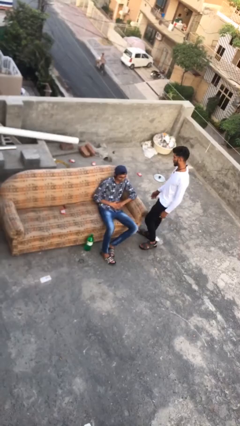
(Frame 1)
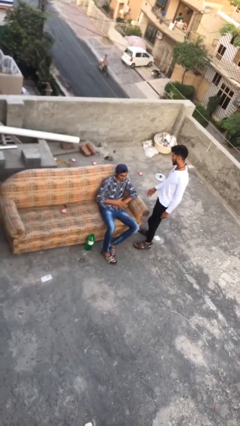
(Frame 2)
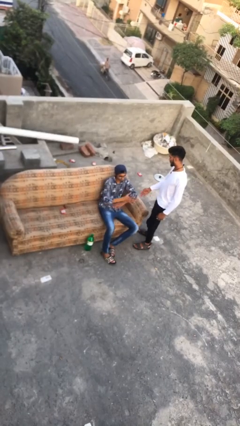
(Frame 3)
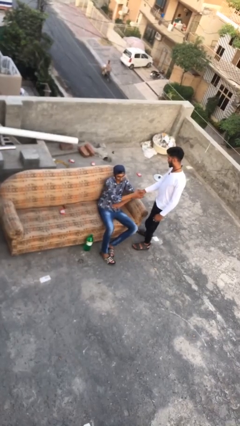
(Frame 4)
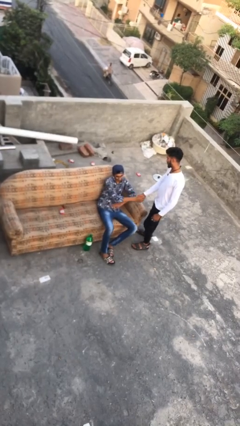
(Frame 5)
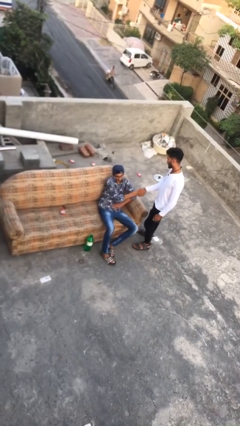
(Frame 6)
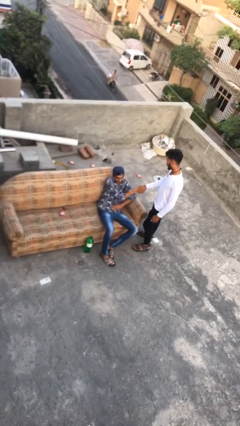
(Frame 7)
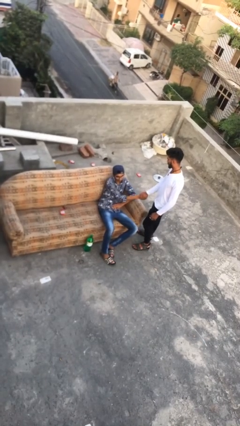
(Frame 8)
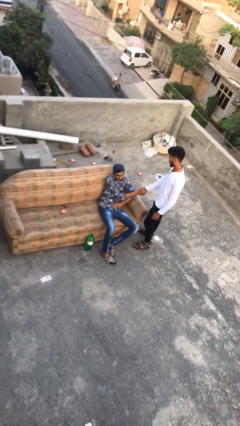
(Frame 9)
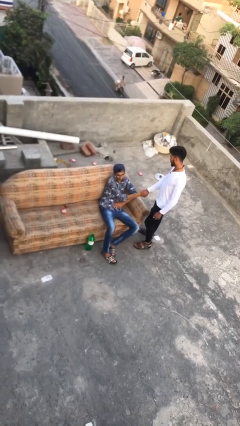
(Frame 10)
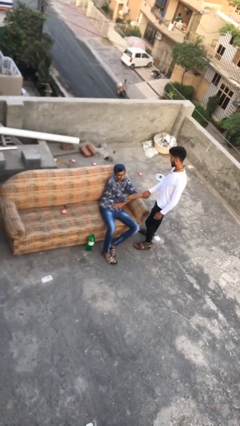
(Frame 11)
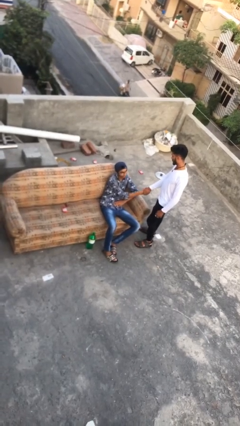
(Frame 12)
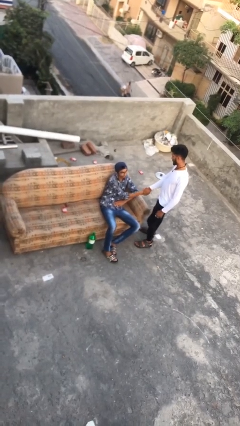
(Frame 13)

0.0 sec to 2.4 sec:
person shakes hand

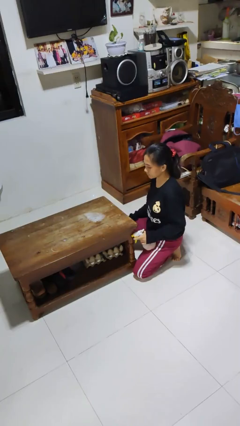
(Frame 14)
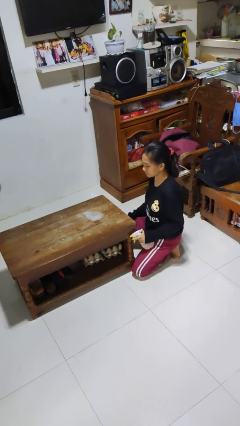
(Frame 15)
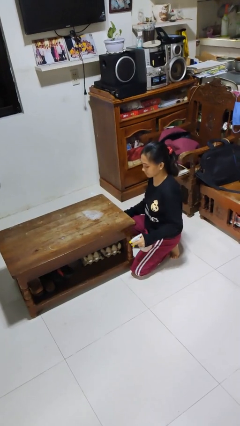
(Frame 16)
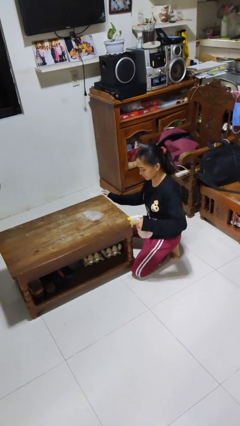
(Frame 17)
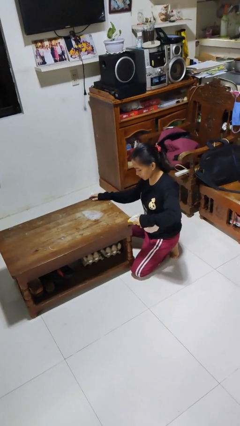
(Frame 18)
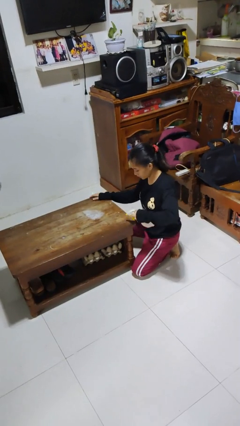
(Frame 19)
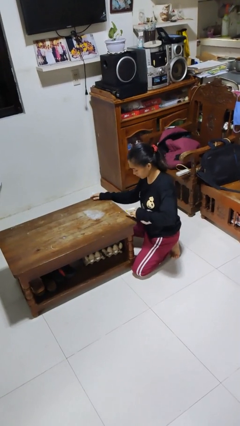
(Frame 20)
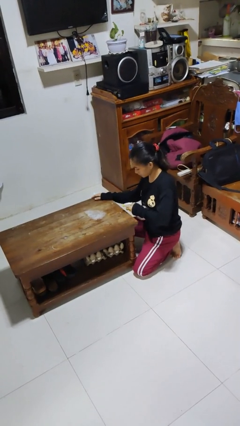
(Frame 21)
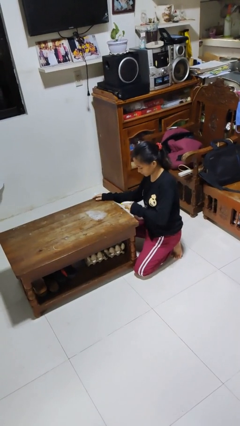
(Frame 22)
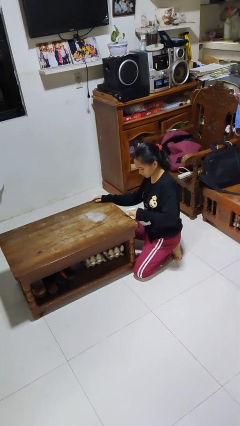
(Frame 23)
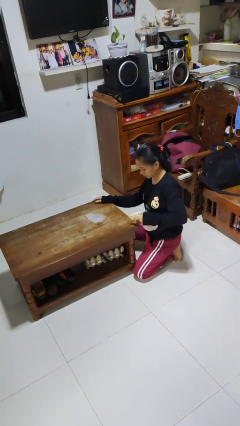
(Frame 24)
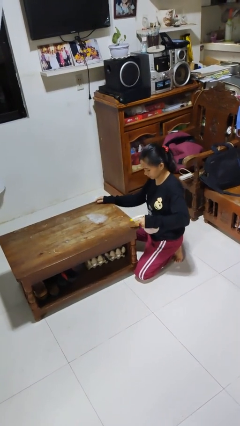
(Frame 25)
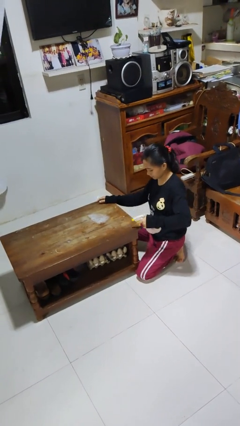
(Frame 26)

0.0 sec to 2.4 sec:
person sprays from bottle

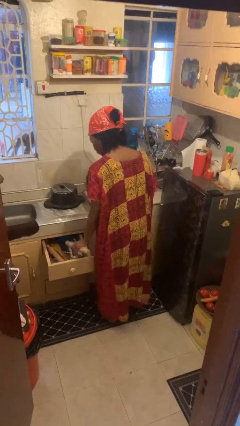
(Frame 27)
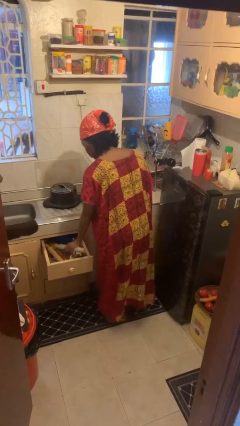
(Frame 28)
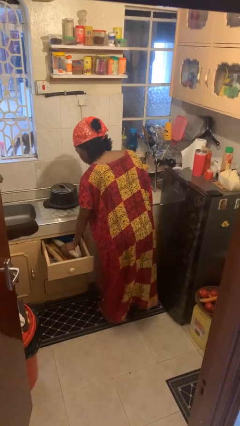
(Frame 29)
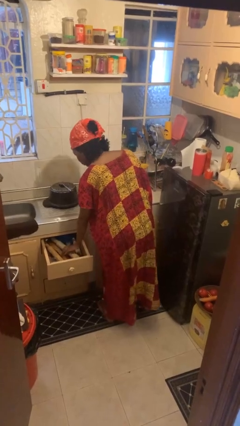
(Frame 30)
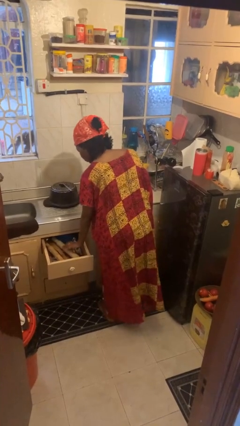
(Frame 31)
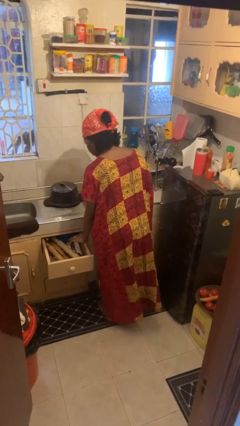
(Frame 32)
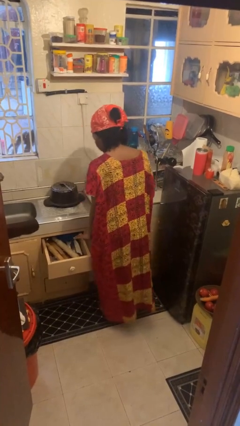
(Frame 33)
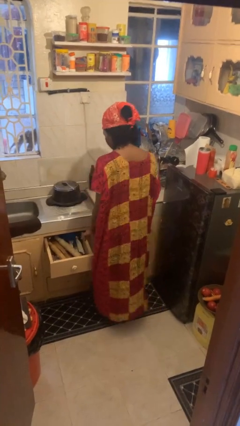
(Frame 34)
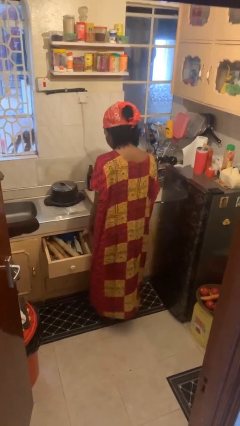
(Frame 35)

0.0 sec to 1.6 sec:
person puts object into kitchen drawer

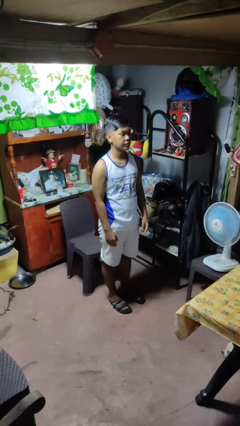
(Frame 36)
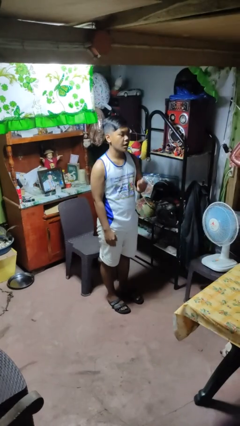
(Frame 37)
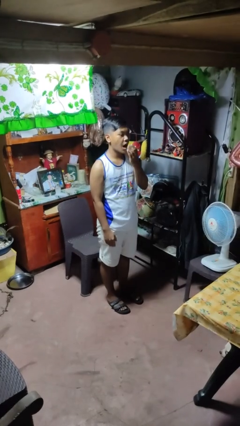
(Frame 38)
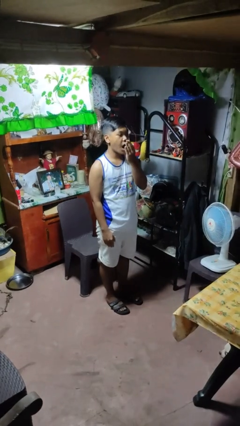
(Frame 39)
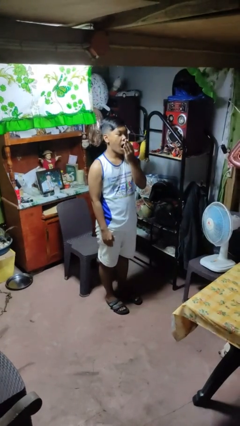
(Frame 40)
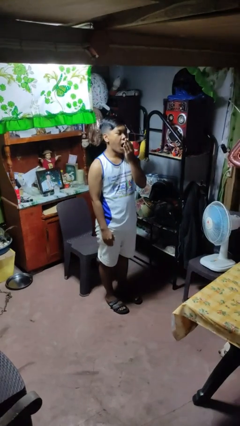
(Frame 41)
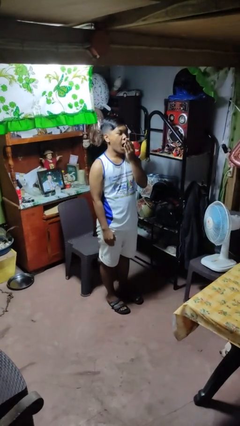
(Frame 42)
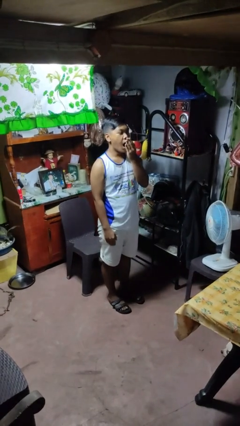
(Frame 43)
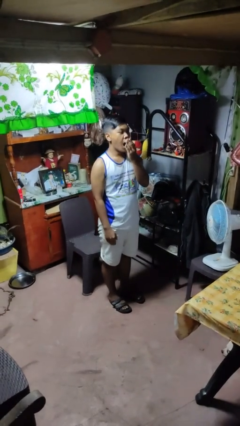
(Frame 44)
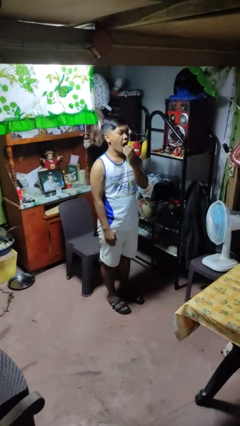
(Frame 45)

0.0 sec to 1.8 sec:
person yawns

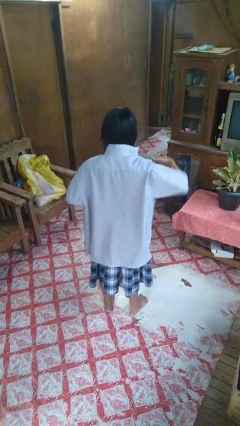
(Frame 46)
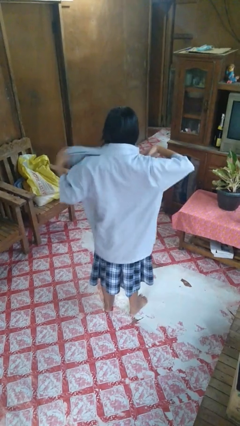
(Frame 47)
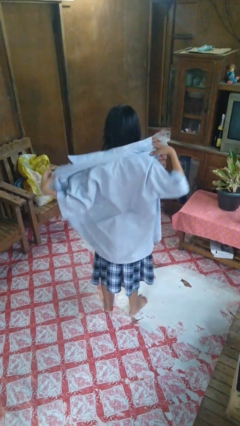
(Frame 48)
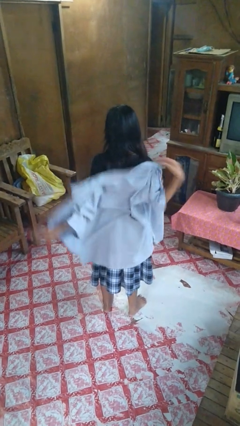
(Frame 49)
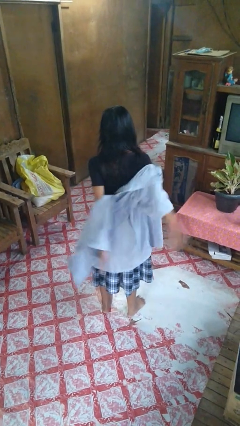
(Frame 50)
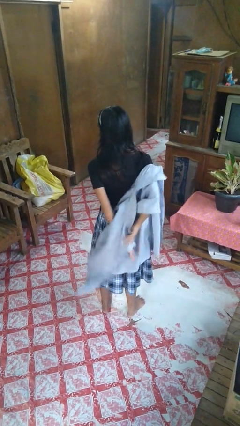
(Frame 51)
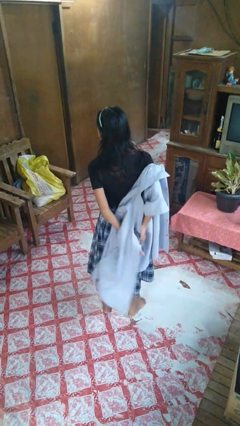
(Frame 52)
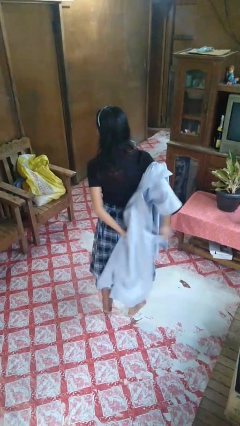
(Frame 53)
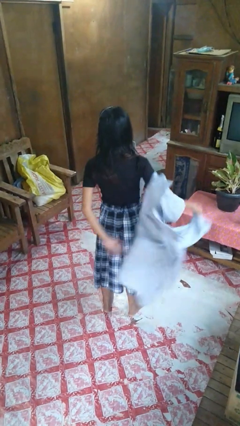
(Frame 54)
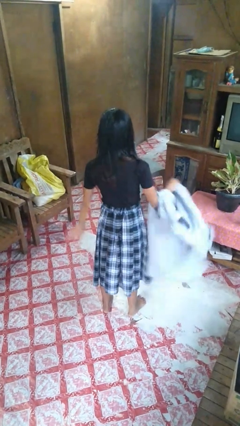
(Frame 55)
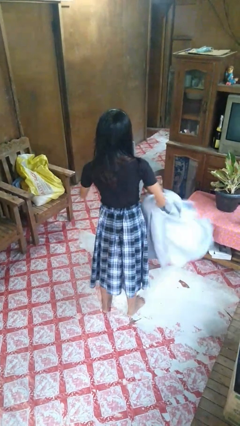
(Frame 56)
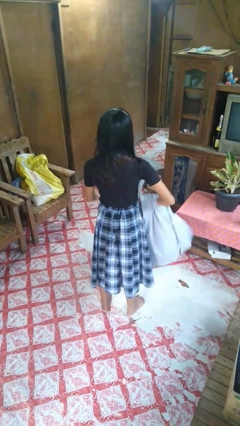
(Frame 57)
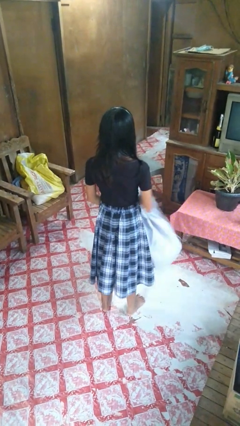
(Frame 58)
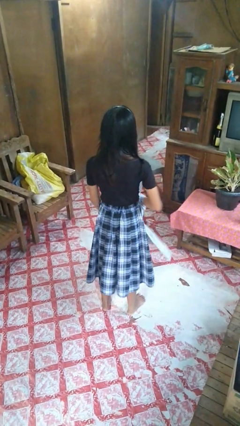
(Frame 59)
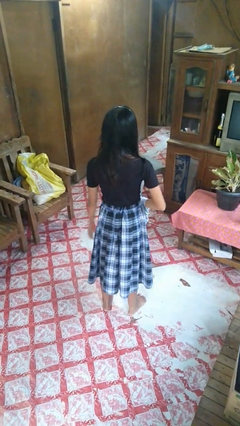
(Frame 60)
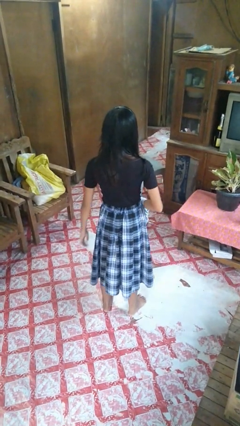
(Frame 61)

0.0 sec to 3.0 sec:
person takes off shirt

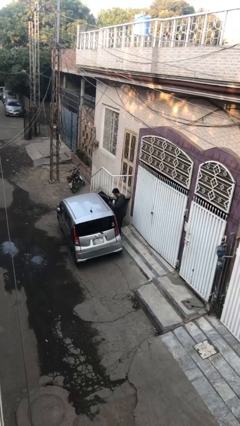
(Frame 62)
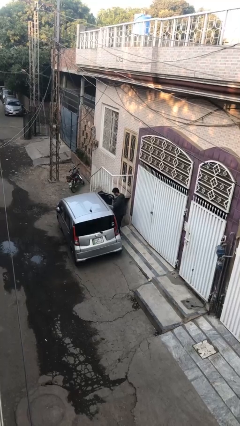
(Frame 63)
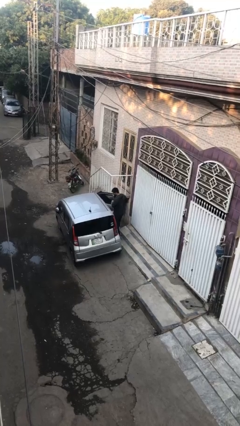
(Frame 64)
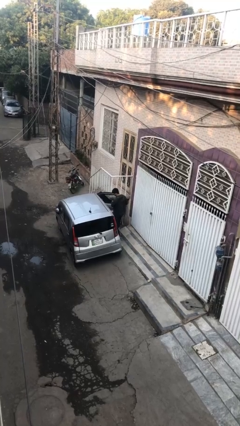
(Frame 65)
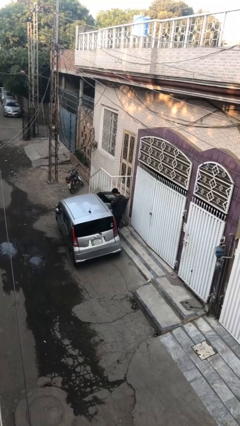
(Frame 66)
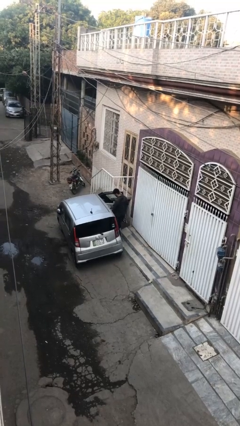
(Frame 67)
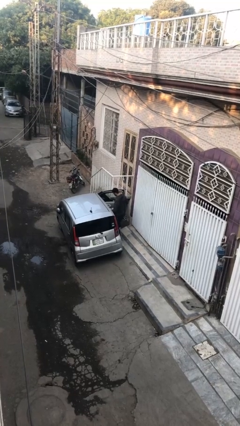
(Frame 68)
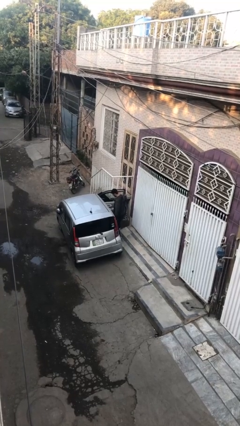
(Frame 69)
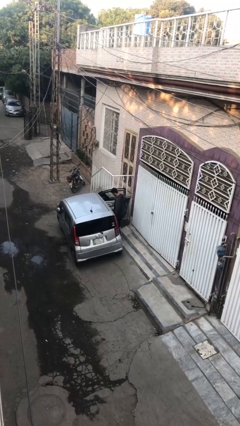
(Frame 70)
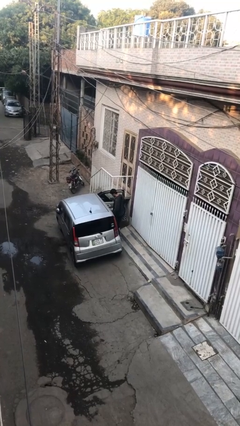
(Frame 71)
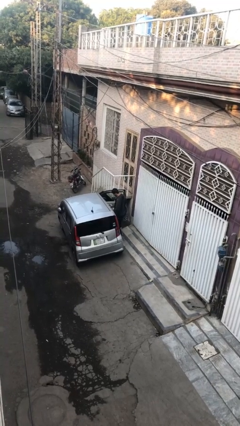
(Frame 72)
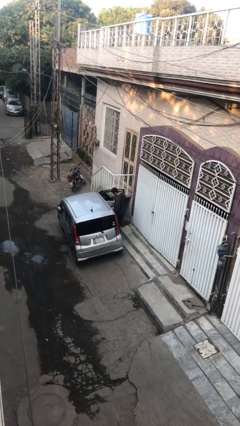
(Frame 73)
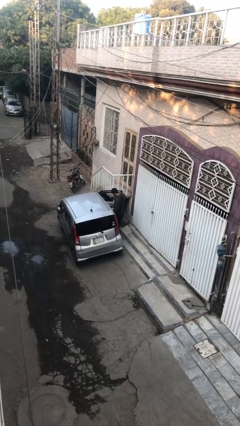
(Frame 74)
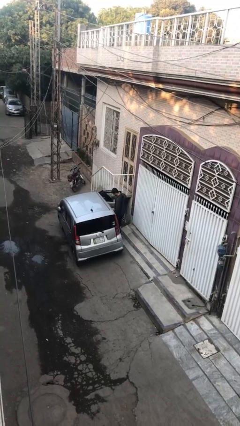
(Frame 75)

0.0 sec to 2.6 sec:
person opens car door

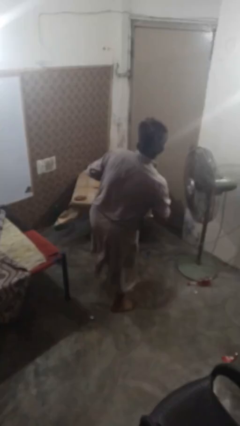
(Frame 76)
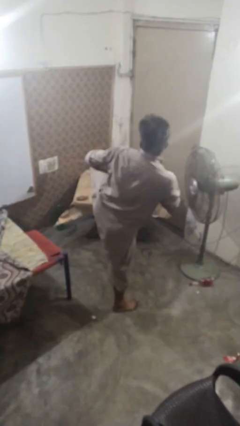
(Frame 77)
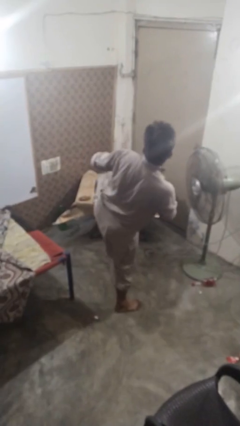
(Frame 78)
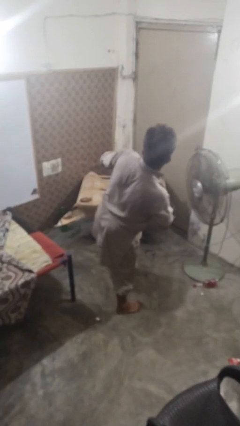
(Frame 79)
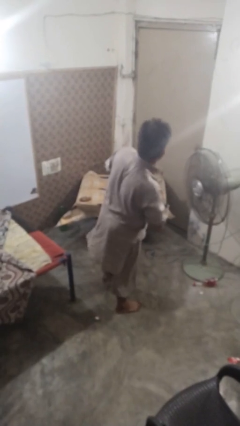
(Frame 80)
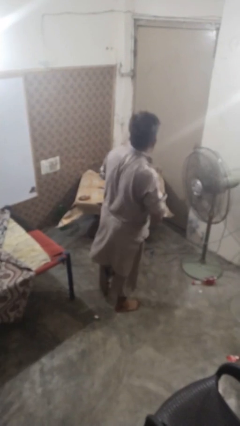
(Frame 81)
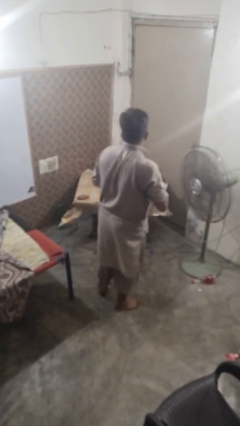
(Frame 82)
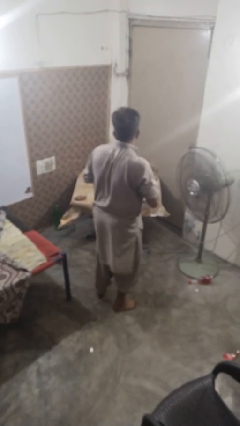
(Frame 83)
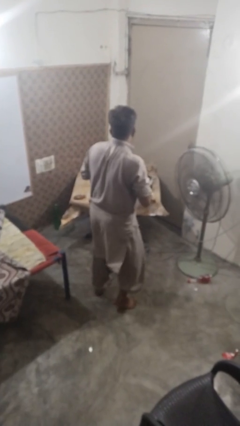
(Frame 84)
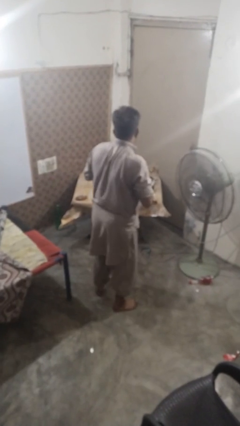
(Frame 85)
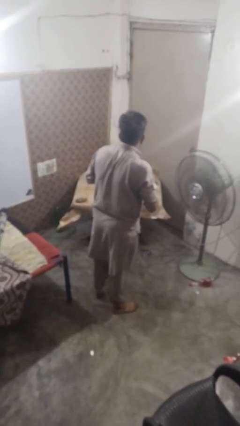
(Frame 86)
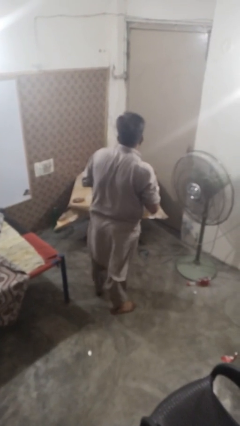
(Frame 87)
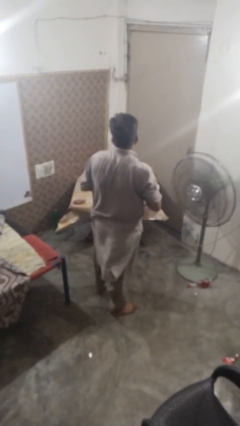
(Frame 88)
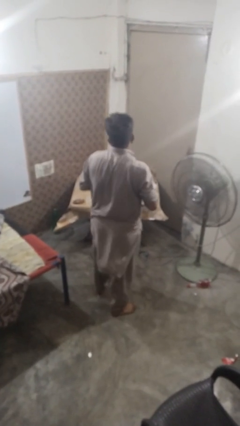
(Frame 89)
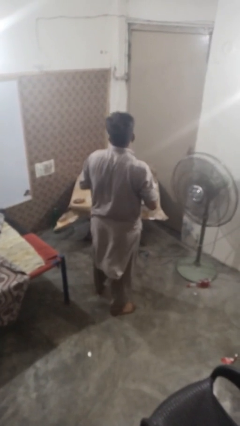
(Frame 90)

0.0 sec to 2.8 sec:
person karate kicks
